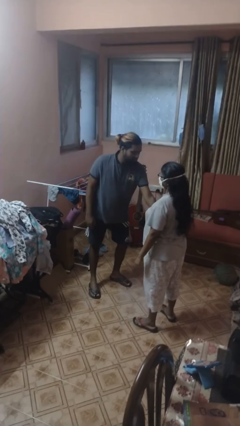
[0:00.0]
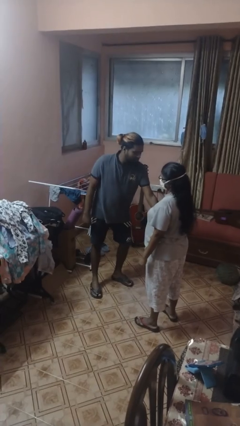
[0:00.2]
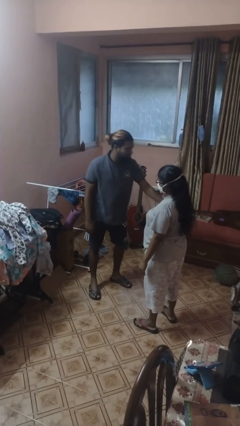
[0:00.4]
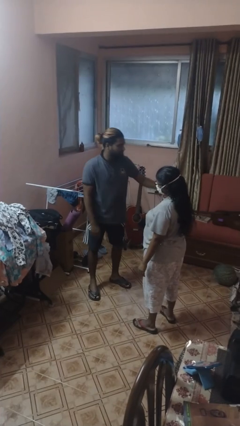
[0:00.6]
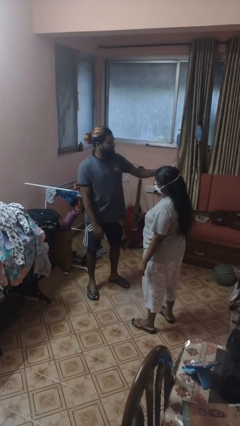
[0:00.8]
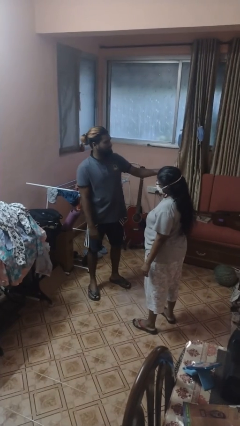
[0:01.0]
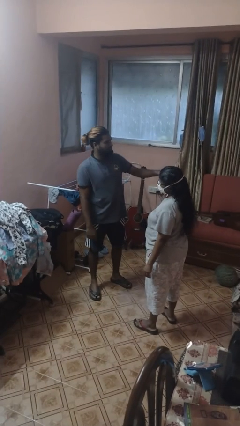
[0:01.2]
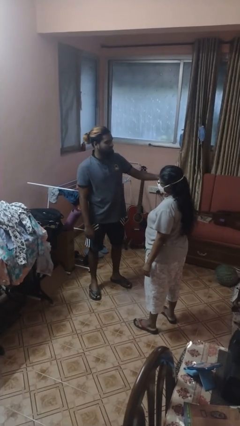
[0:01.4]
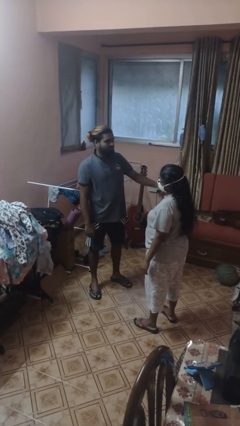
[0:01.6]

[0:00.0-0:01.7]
person grabs person by forearm

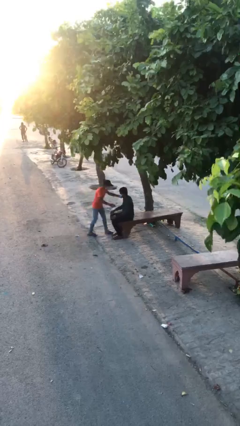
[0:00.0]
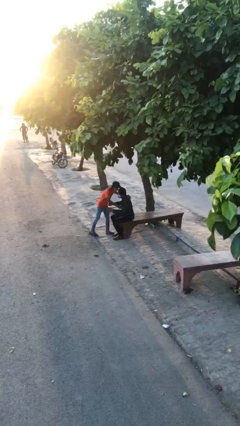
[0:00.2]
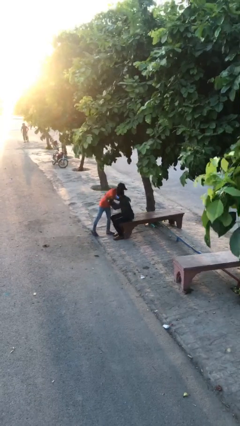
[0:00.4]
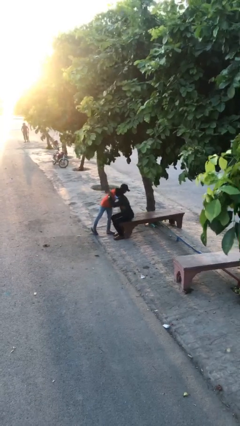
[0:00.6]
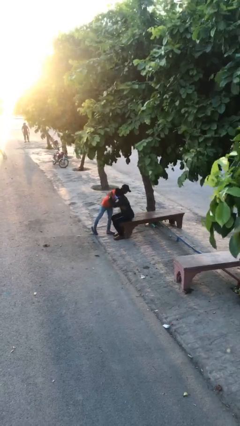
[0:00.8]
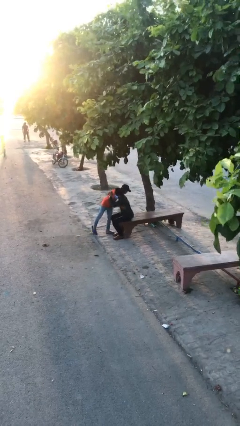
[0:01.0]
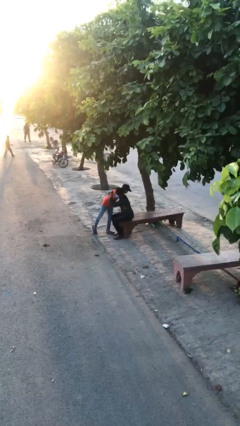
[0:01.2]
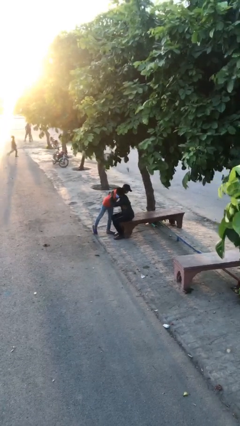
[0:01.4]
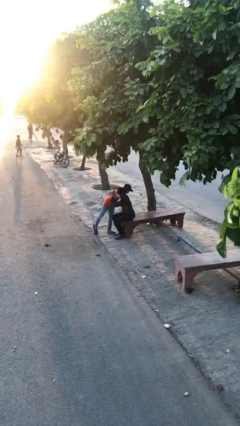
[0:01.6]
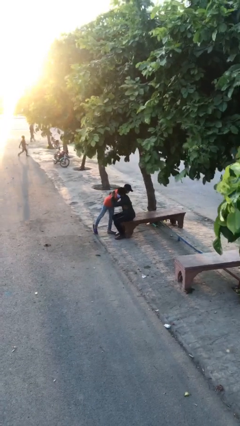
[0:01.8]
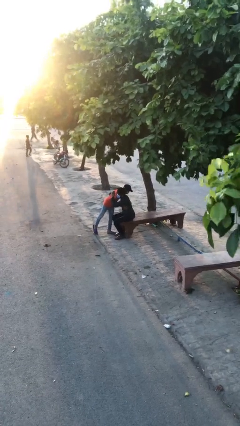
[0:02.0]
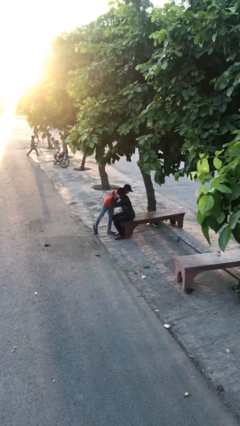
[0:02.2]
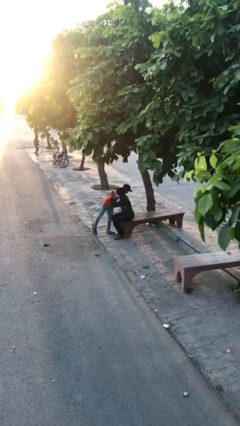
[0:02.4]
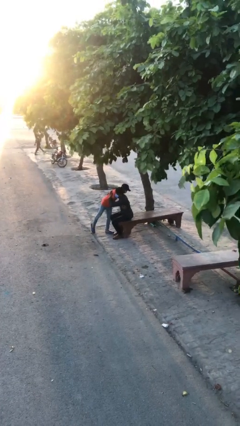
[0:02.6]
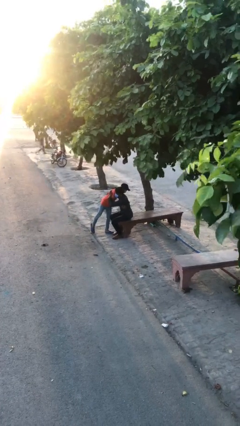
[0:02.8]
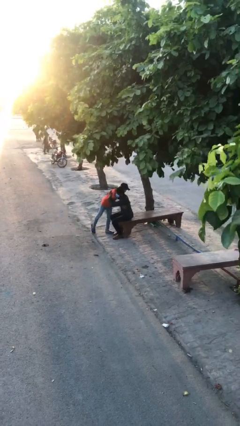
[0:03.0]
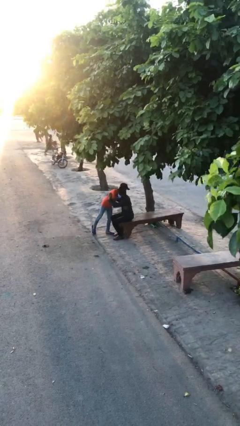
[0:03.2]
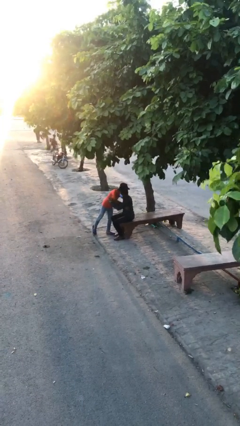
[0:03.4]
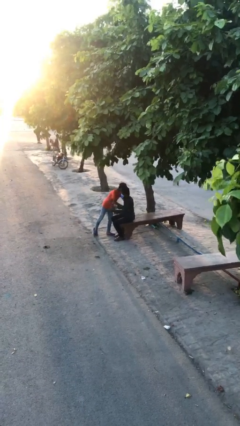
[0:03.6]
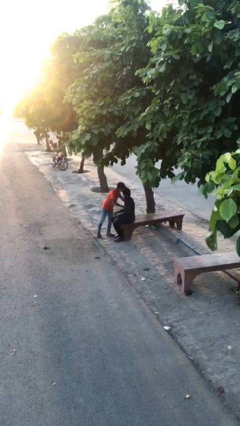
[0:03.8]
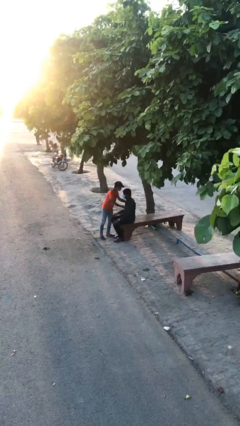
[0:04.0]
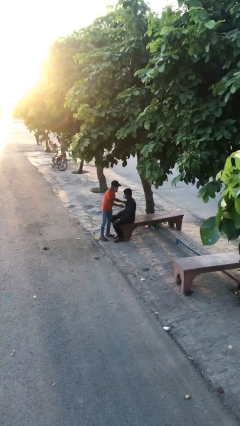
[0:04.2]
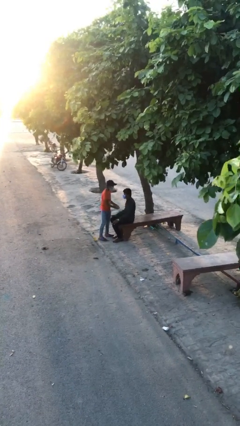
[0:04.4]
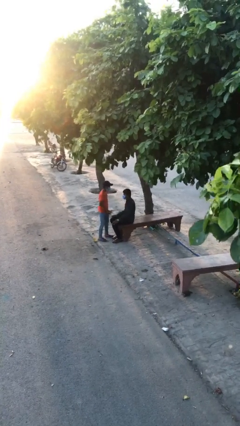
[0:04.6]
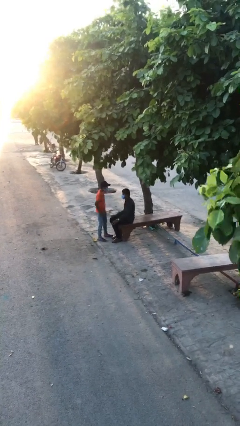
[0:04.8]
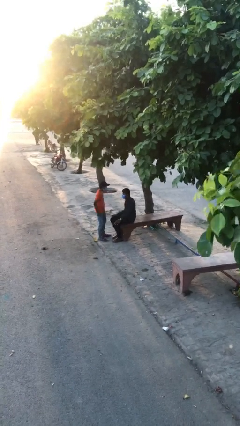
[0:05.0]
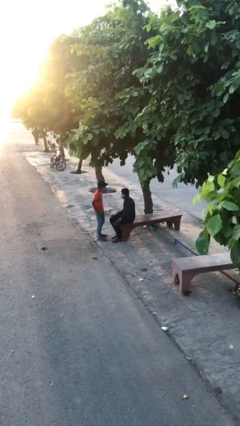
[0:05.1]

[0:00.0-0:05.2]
person embraces person

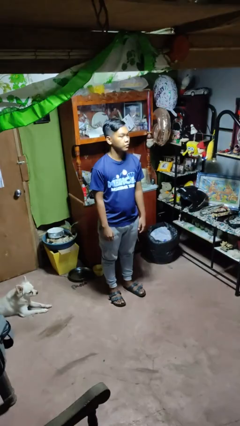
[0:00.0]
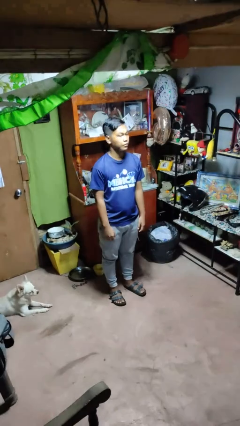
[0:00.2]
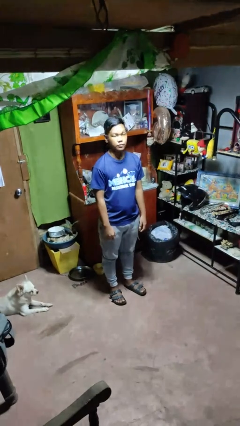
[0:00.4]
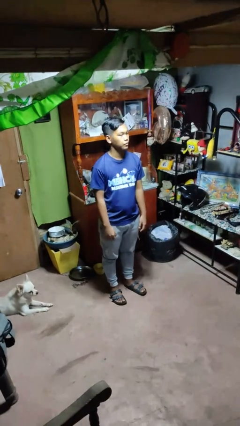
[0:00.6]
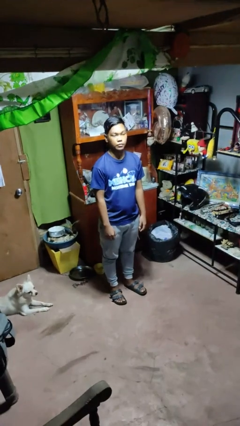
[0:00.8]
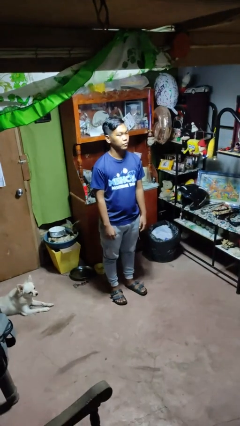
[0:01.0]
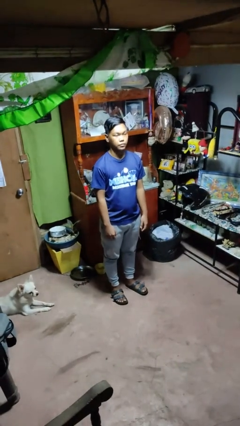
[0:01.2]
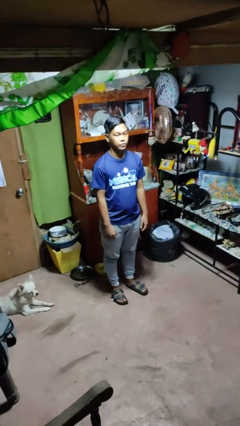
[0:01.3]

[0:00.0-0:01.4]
person shakes head

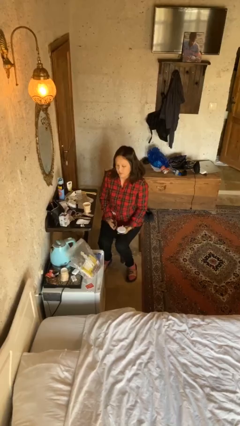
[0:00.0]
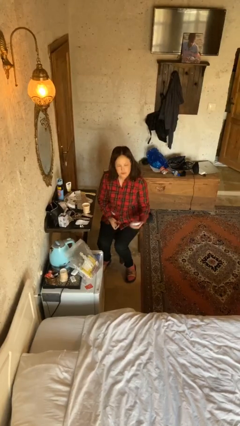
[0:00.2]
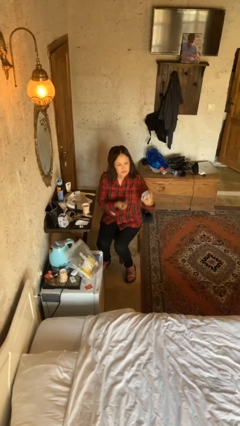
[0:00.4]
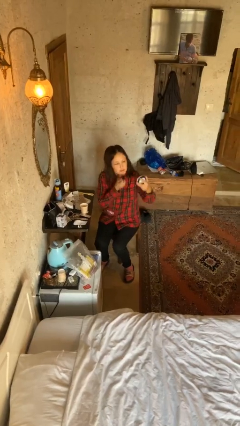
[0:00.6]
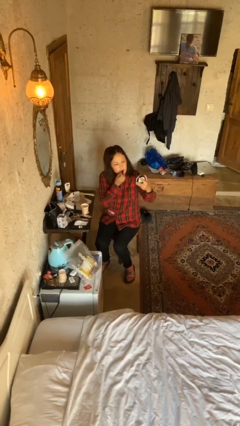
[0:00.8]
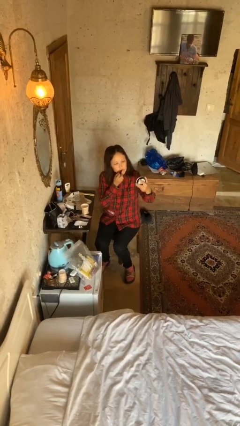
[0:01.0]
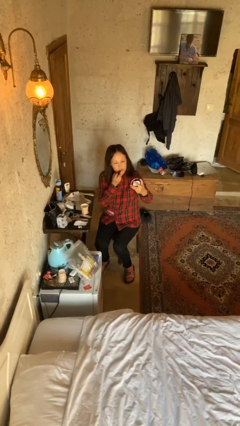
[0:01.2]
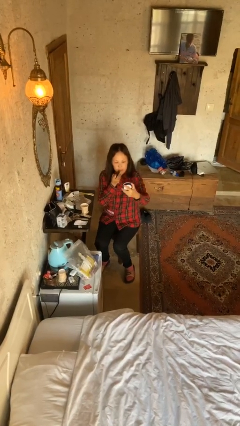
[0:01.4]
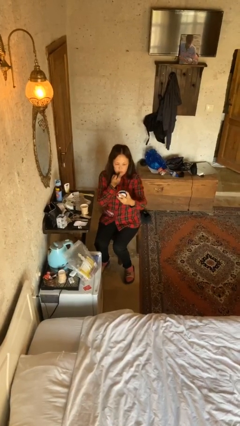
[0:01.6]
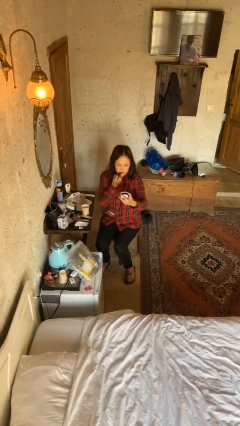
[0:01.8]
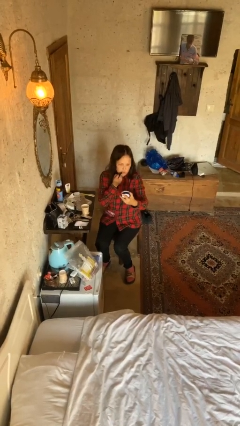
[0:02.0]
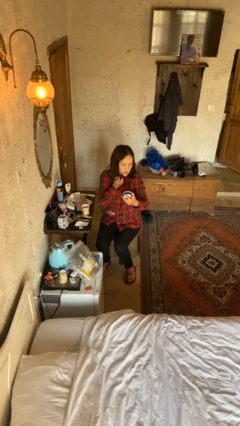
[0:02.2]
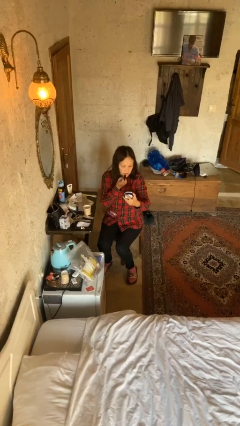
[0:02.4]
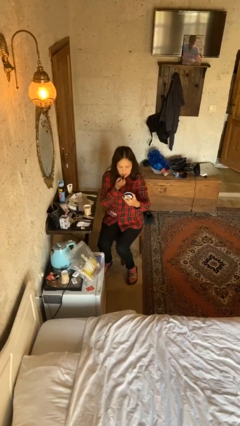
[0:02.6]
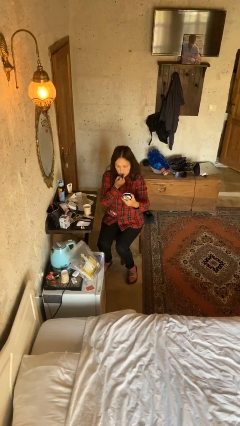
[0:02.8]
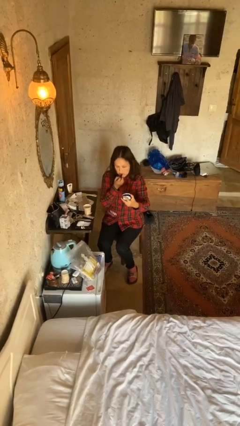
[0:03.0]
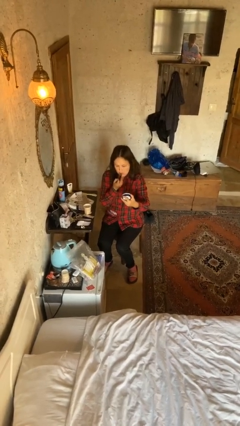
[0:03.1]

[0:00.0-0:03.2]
person applies lip makeup

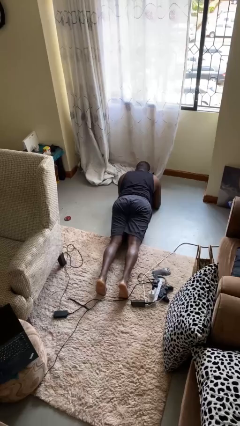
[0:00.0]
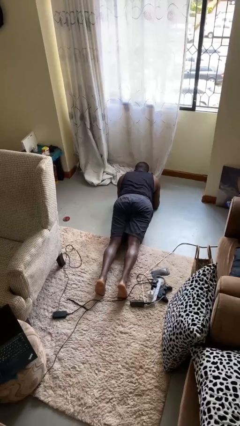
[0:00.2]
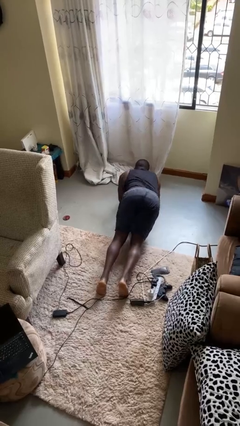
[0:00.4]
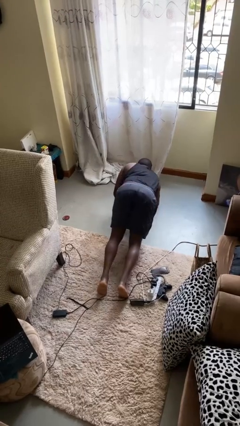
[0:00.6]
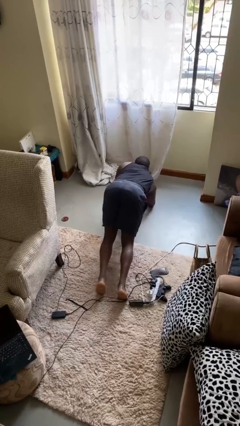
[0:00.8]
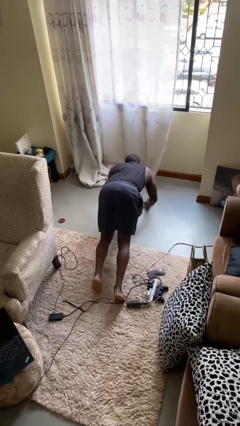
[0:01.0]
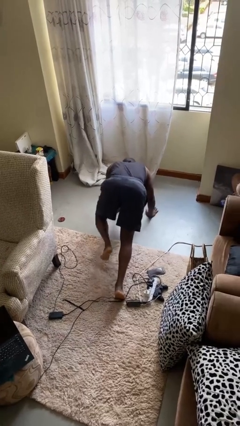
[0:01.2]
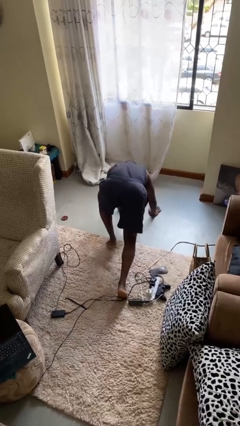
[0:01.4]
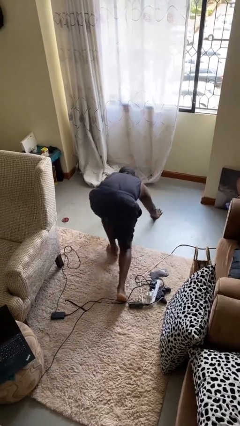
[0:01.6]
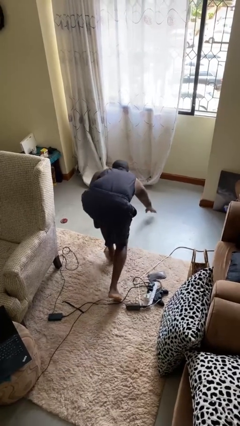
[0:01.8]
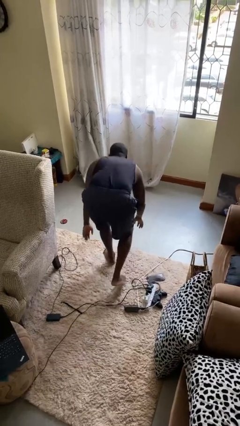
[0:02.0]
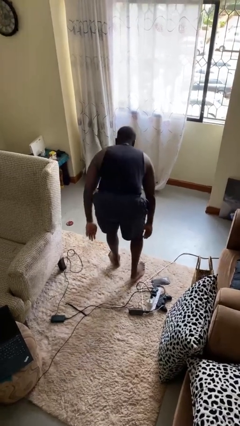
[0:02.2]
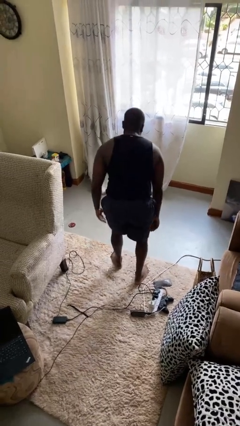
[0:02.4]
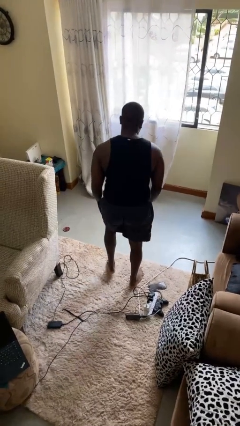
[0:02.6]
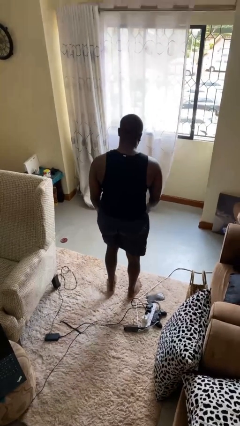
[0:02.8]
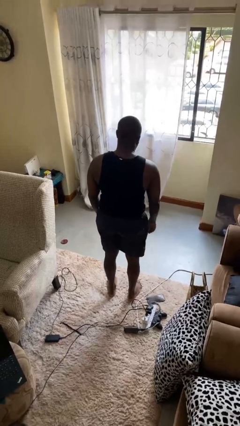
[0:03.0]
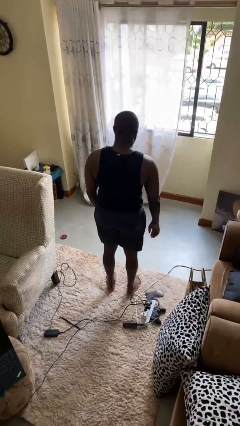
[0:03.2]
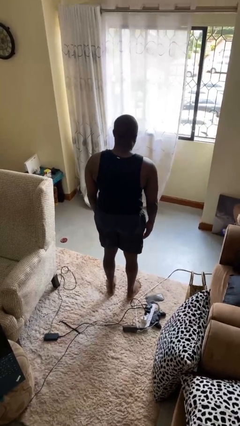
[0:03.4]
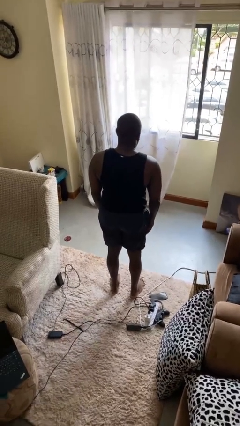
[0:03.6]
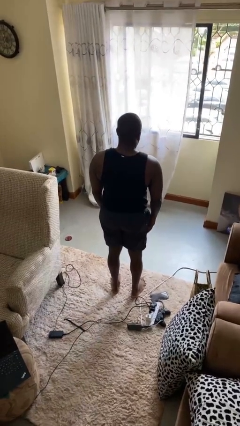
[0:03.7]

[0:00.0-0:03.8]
person stands up from floor

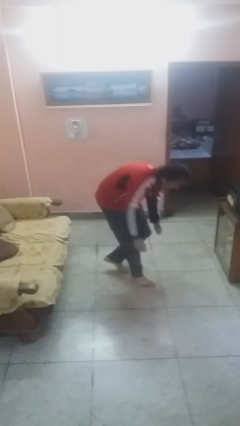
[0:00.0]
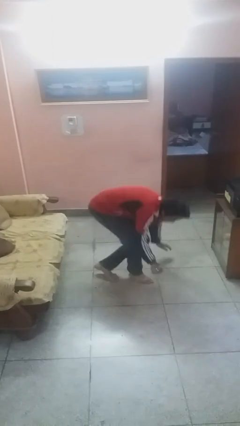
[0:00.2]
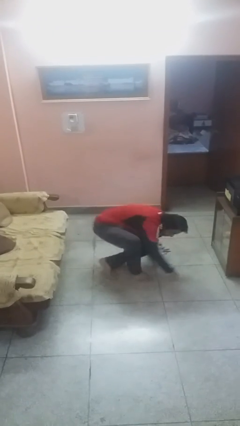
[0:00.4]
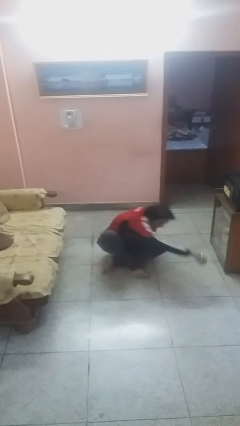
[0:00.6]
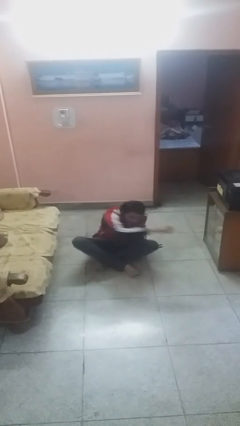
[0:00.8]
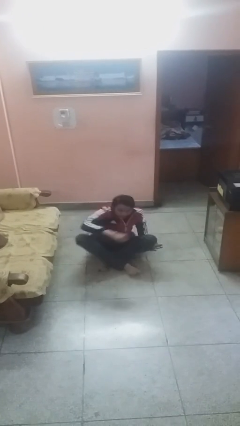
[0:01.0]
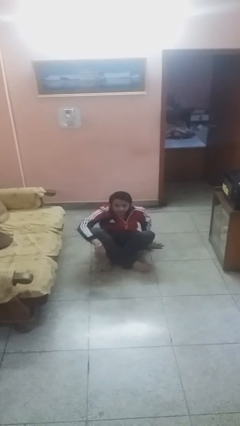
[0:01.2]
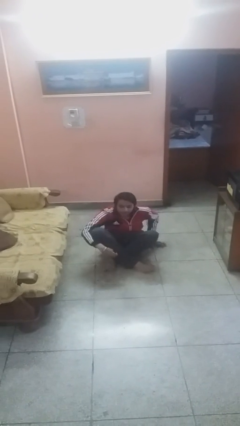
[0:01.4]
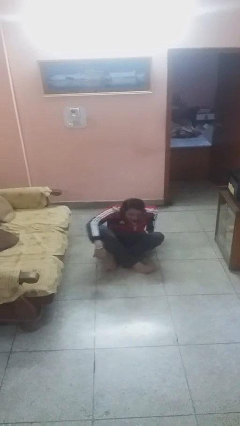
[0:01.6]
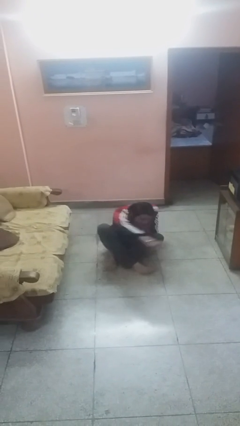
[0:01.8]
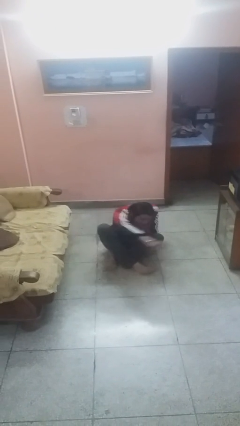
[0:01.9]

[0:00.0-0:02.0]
person sits down

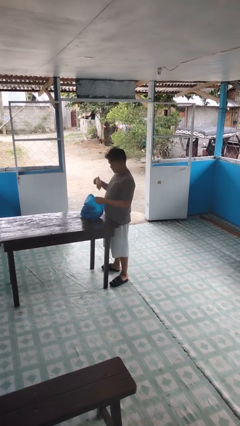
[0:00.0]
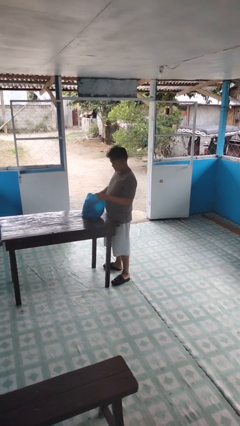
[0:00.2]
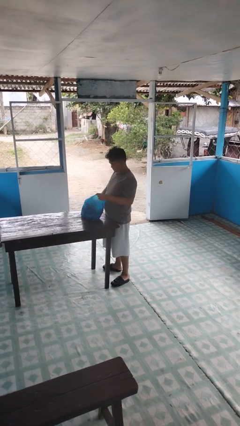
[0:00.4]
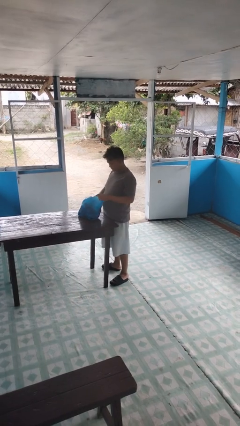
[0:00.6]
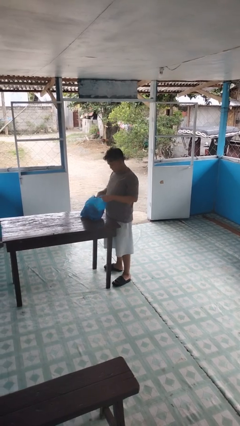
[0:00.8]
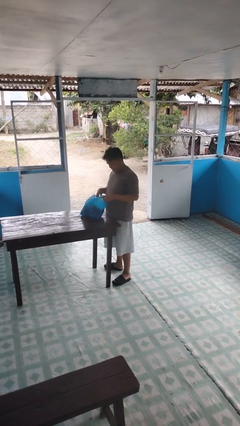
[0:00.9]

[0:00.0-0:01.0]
person puts object into bag
